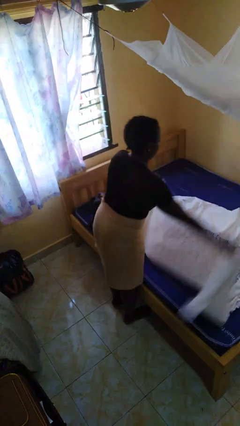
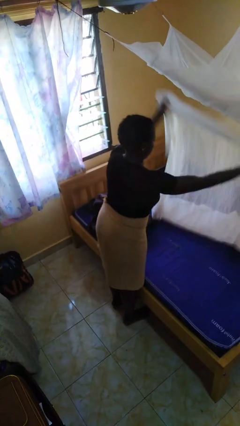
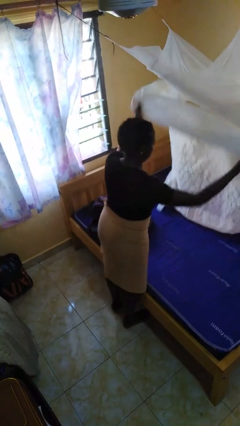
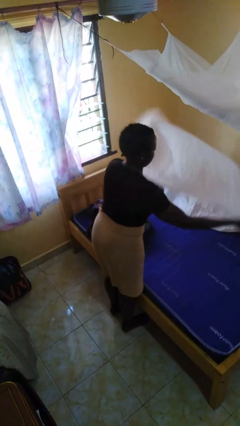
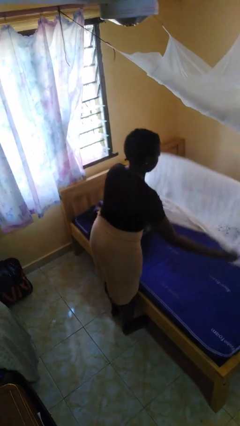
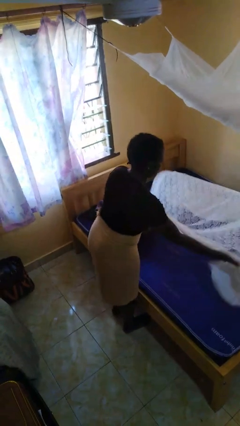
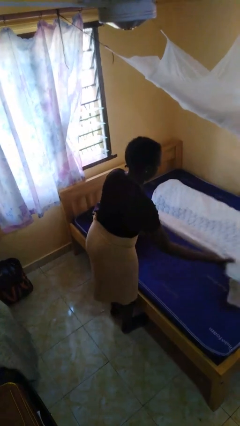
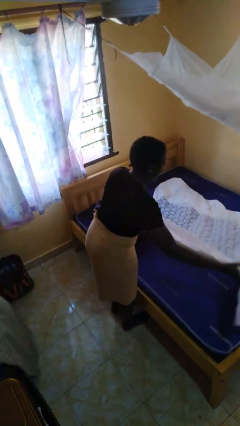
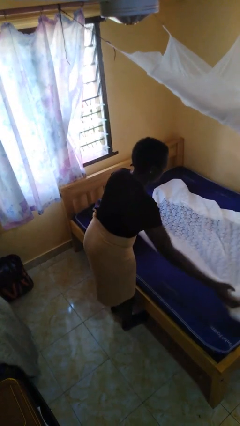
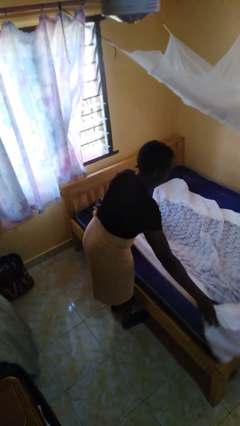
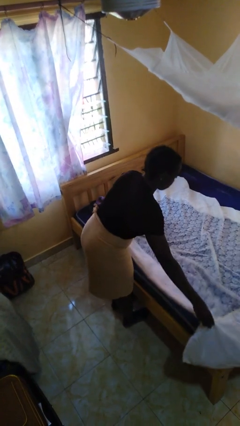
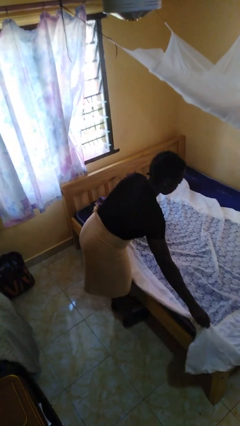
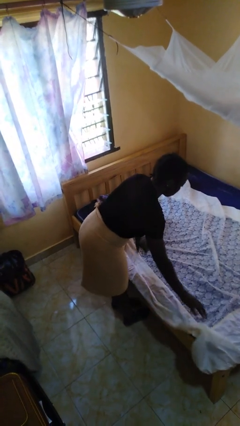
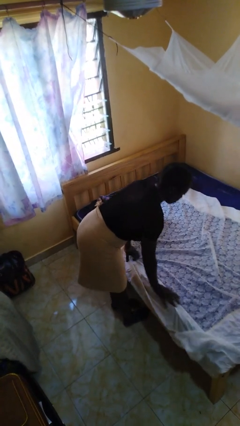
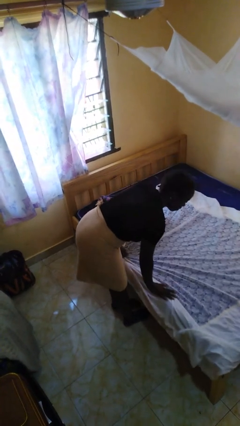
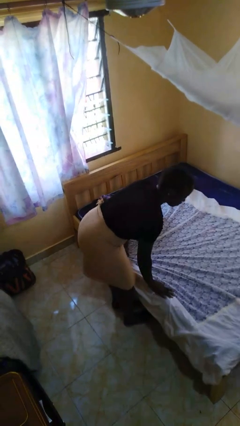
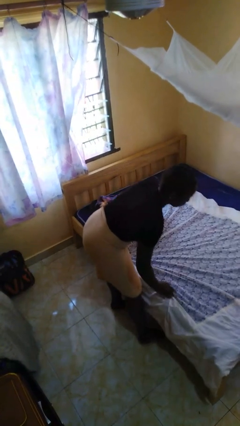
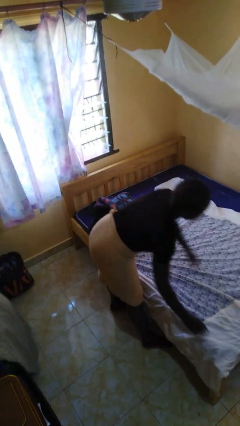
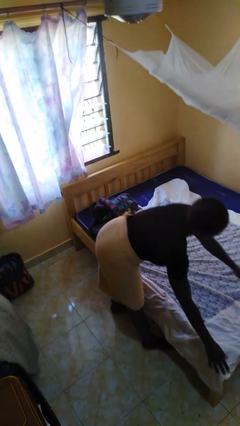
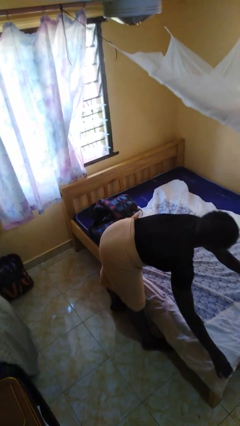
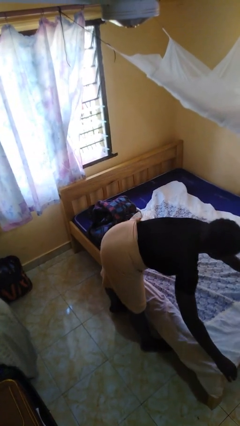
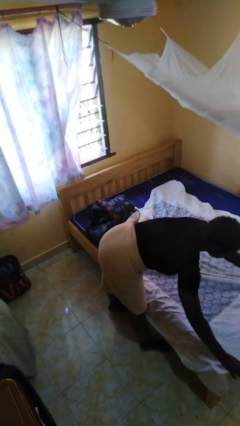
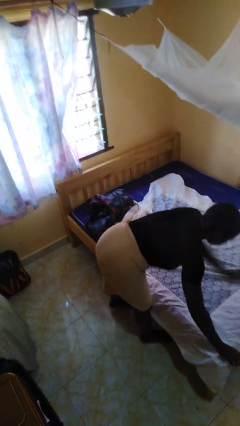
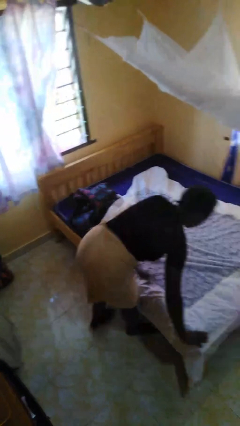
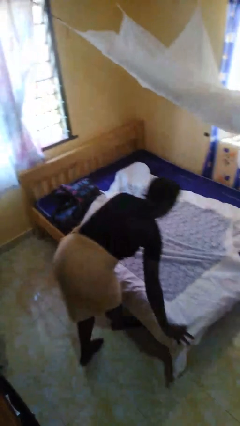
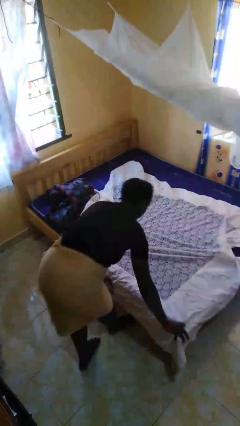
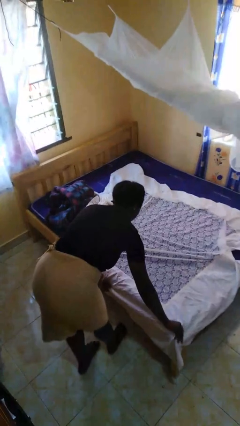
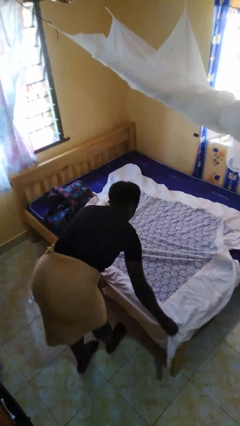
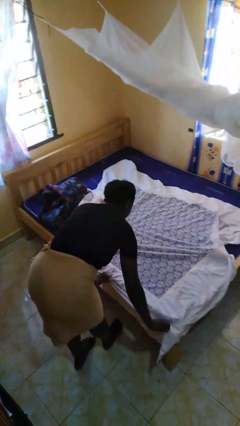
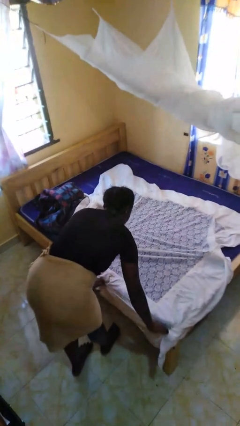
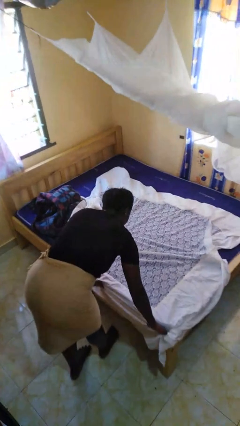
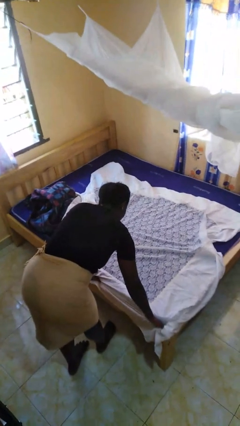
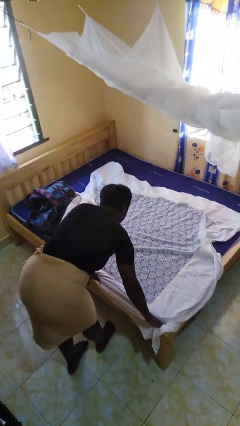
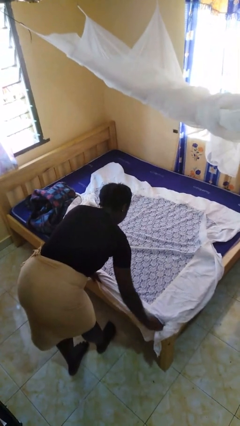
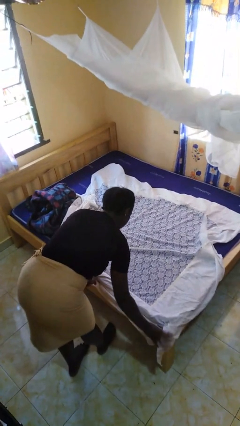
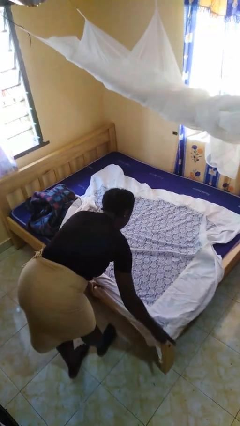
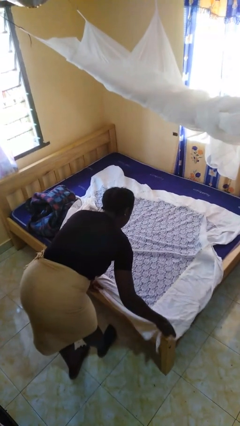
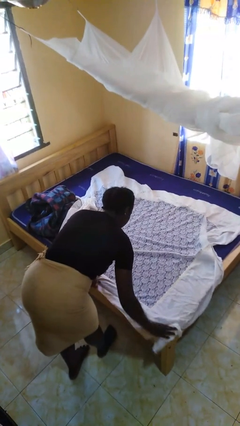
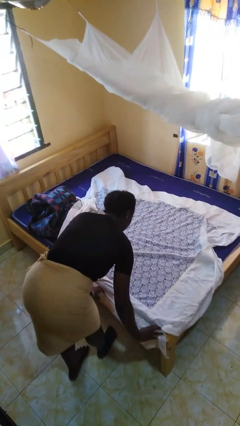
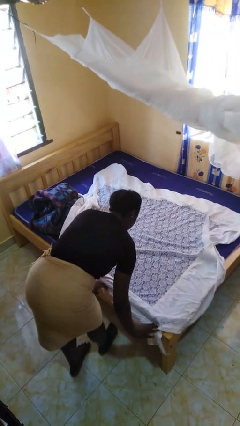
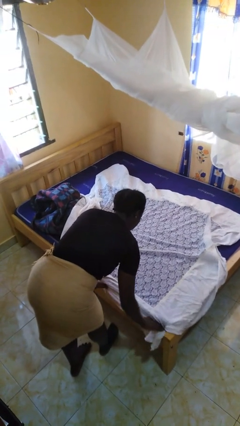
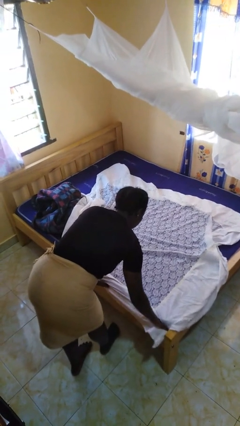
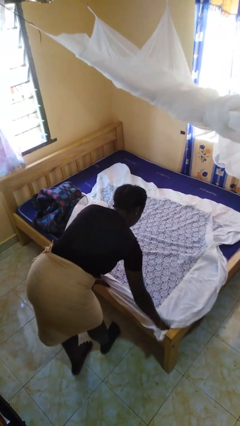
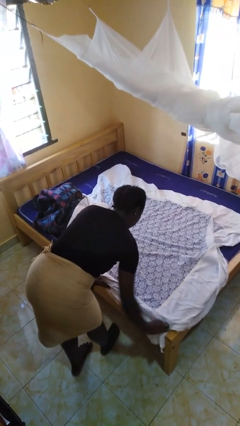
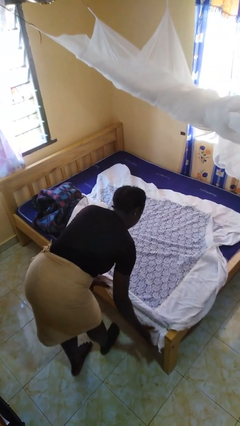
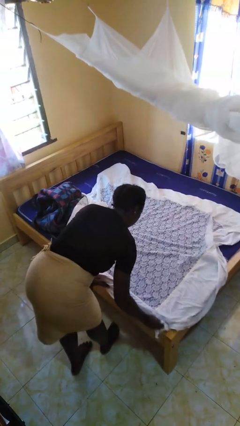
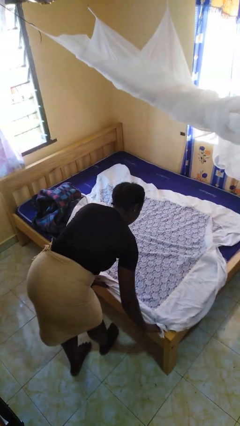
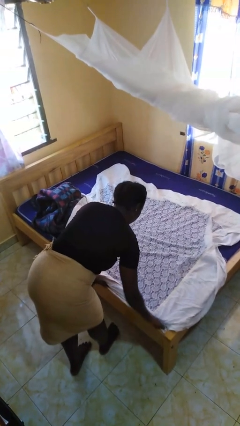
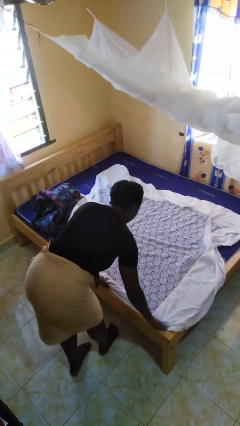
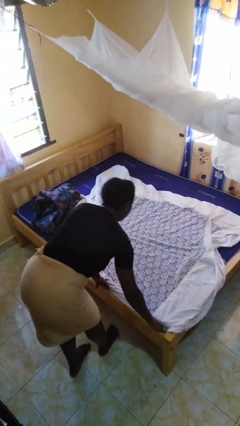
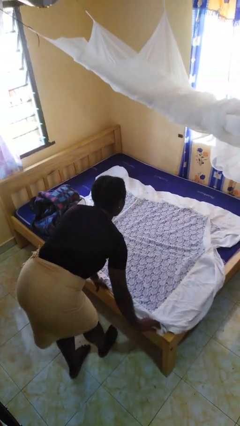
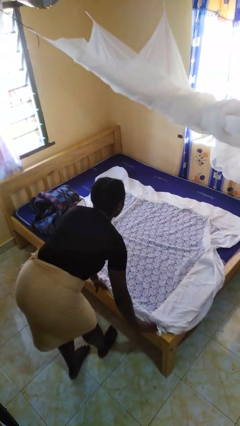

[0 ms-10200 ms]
person makes bed

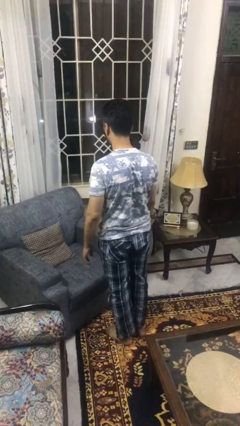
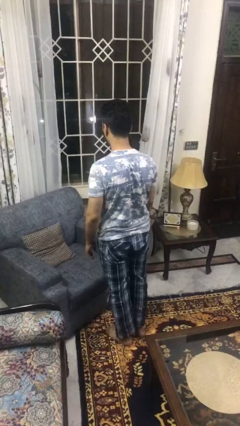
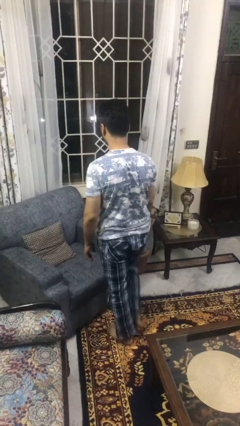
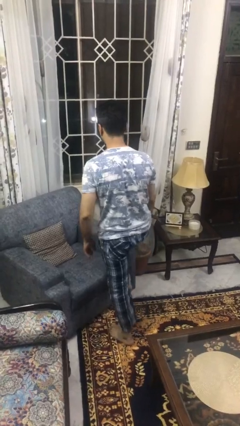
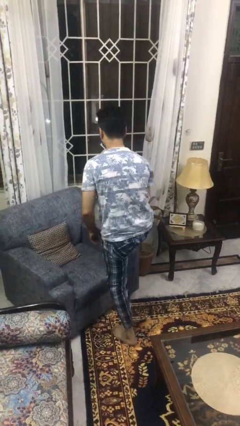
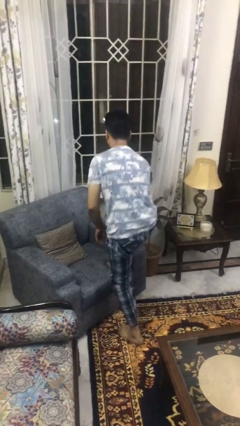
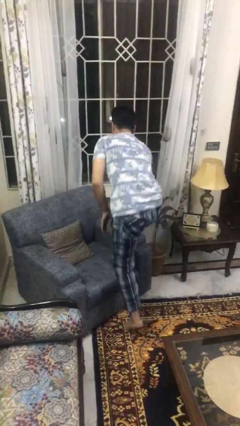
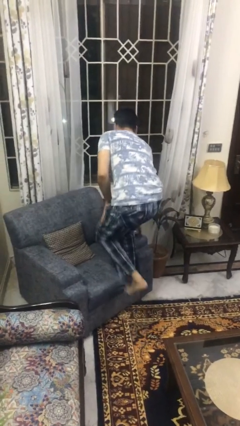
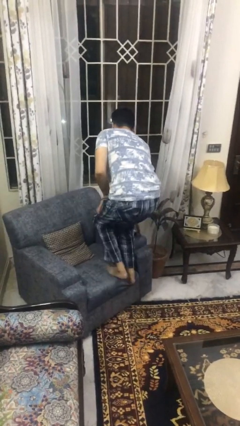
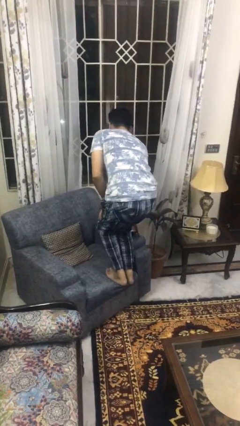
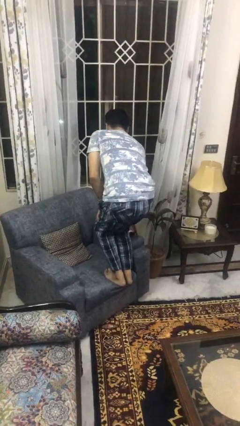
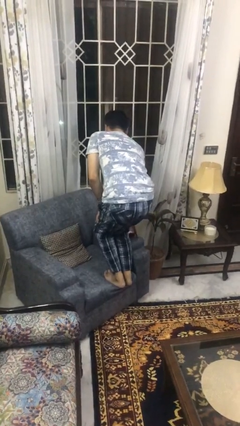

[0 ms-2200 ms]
person climbs on couch

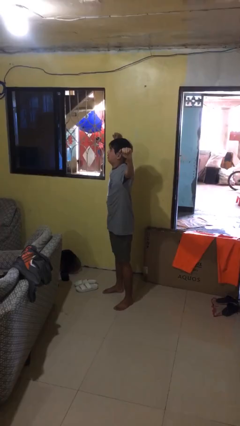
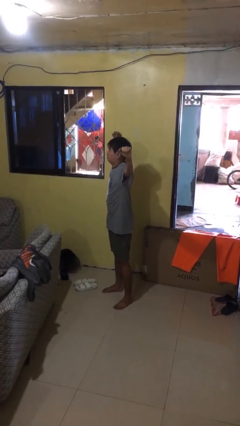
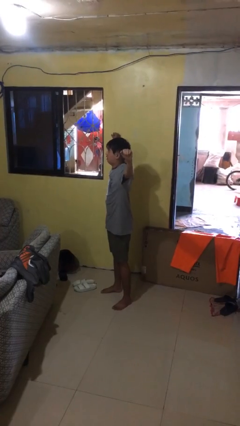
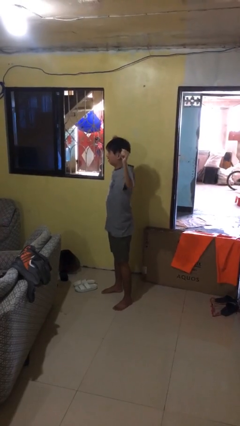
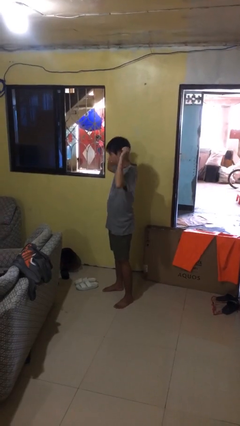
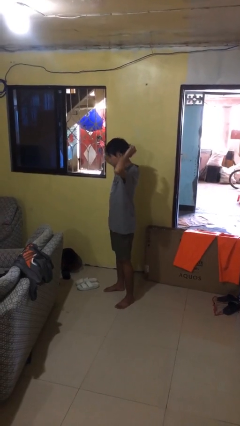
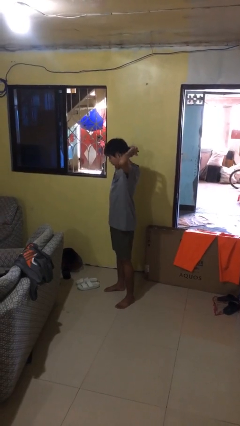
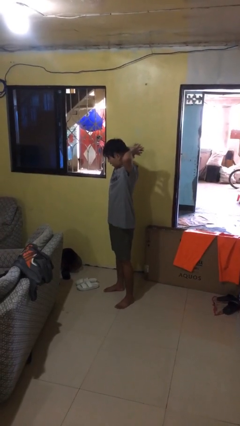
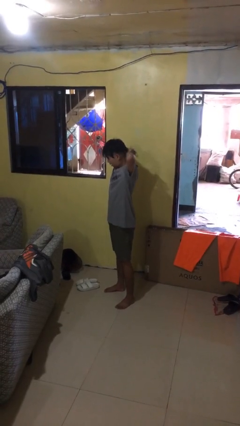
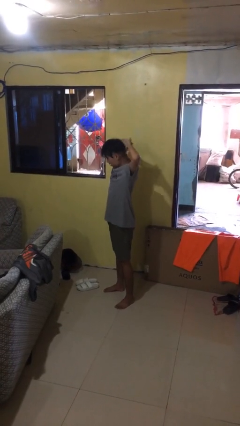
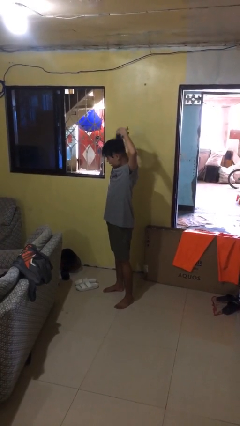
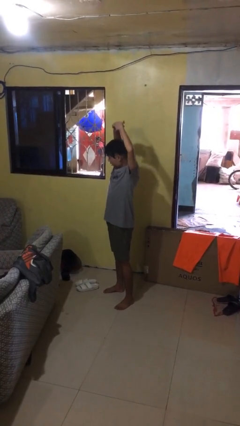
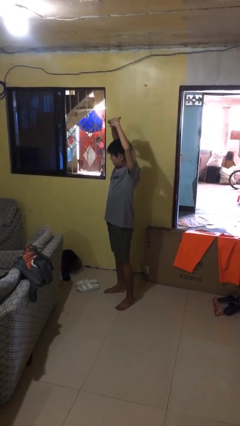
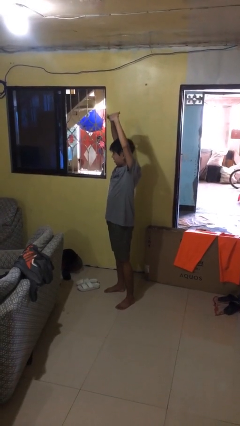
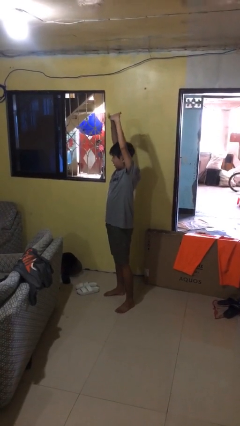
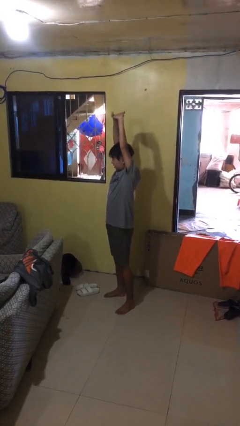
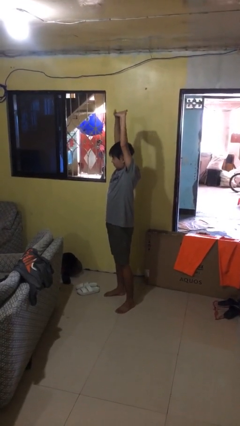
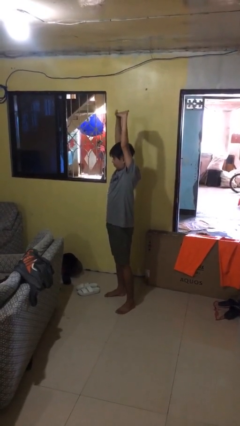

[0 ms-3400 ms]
person stretches arms over head

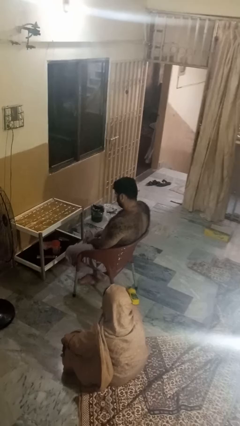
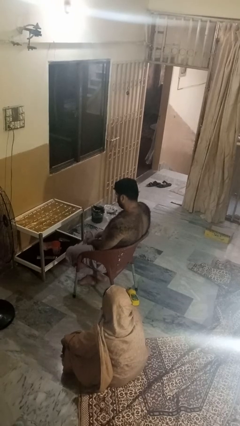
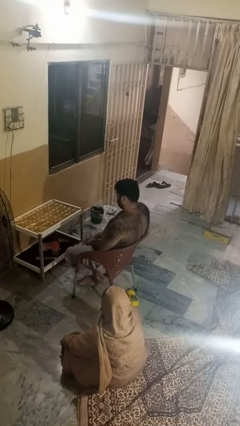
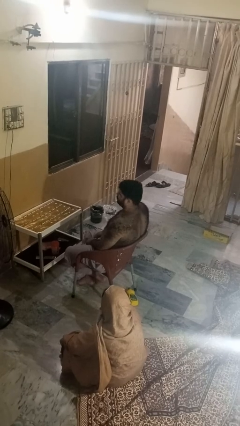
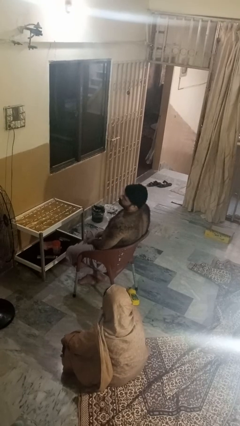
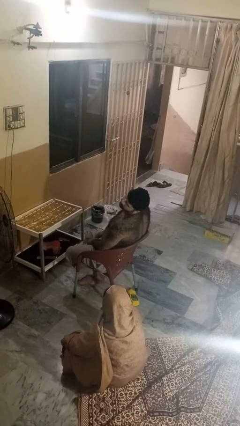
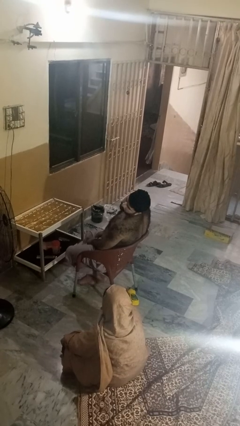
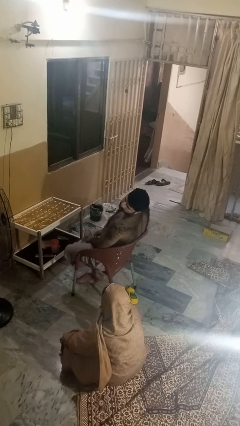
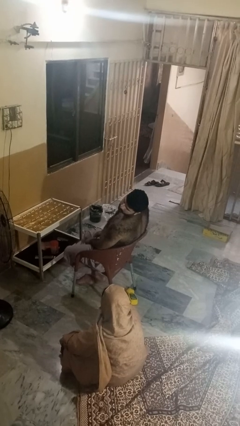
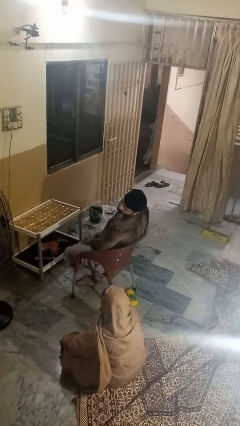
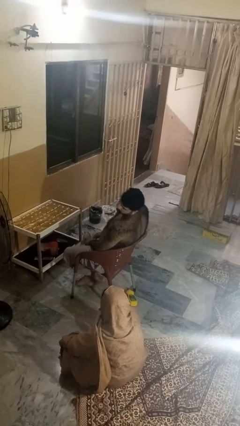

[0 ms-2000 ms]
person looks over shoulder
